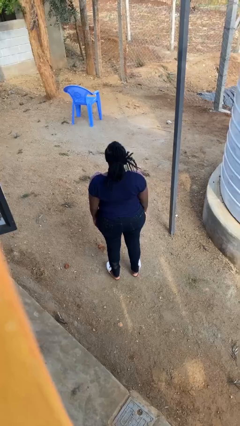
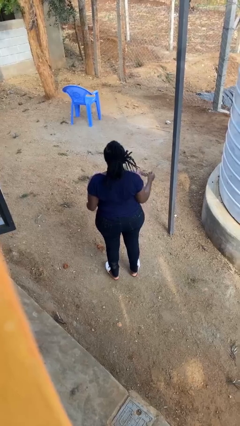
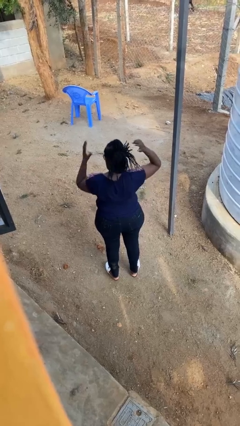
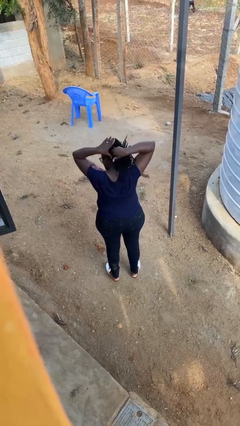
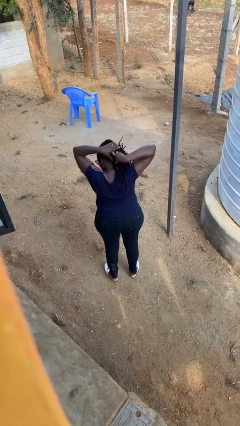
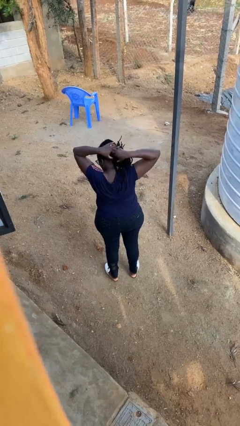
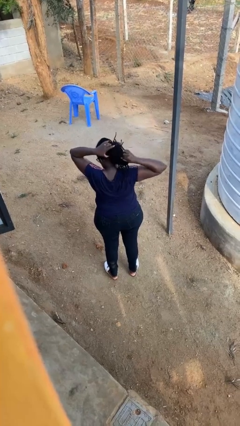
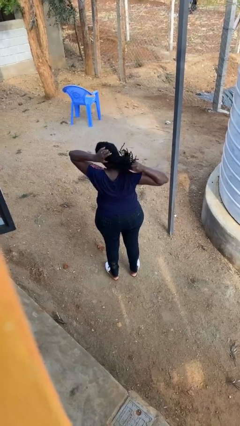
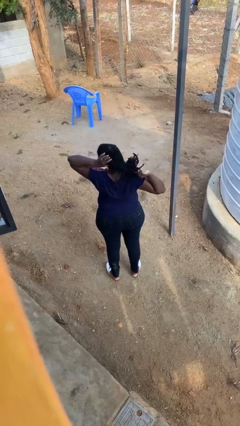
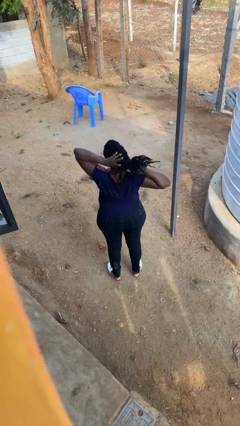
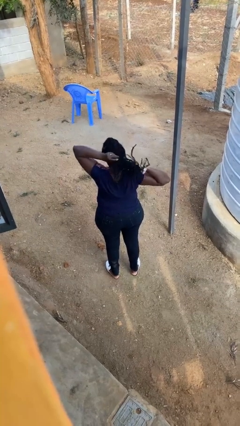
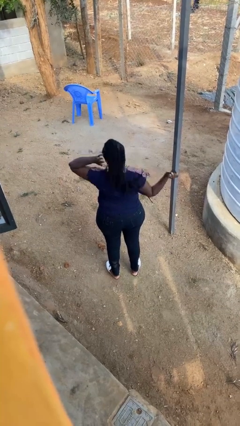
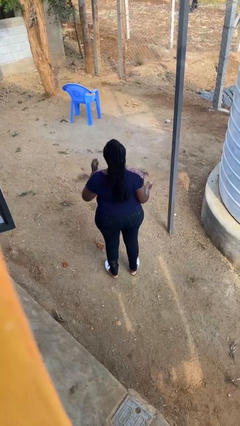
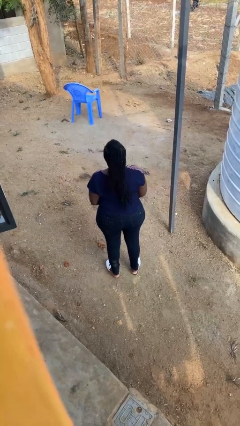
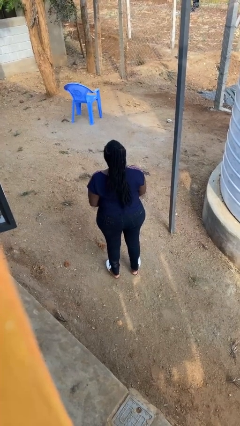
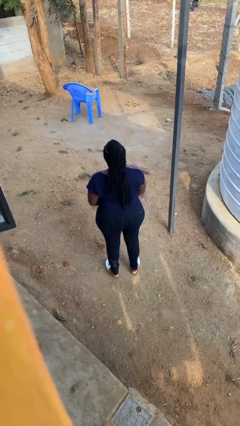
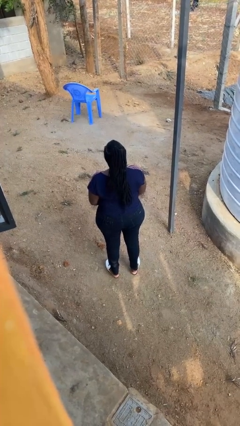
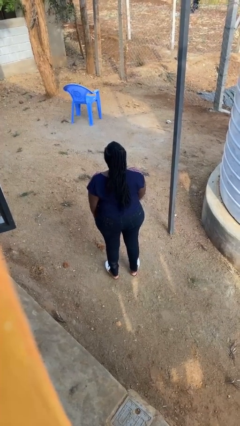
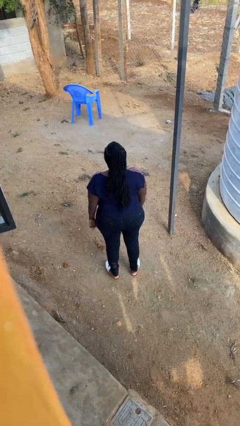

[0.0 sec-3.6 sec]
person takes off hairtie

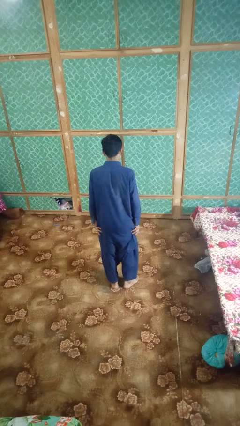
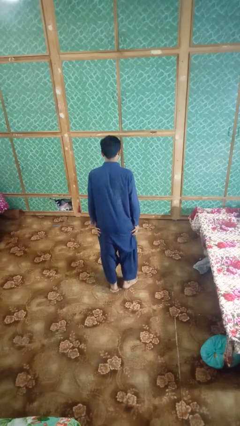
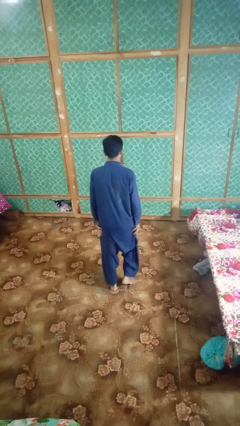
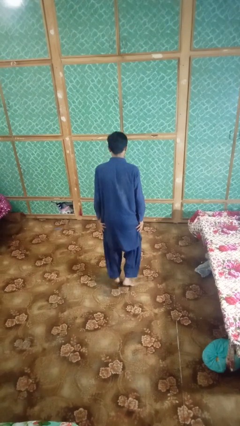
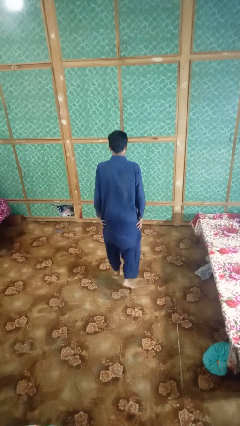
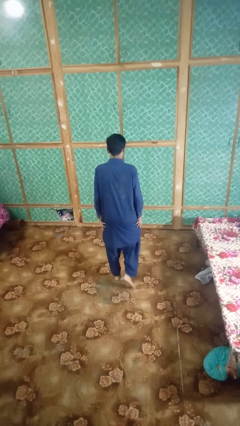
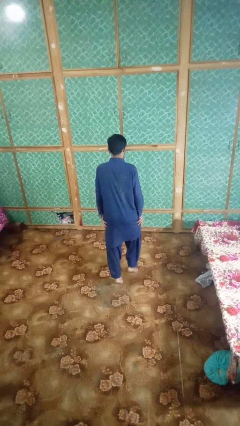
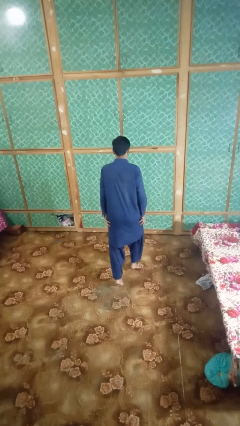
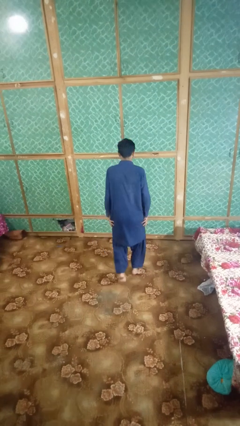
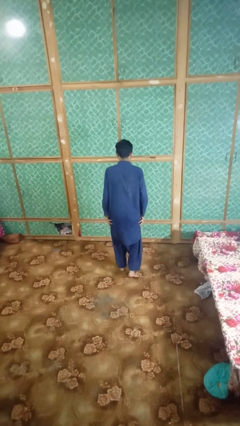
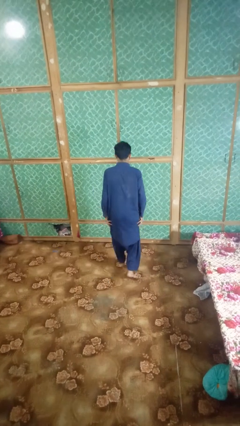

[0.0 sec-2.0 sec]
person walks tiptoe

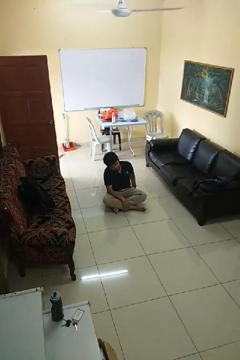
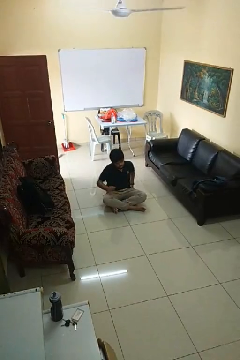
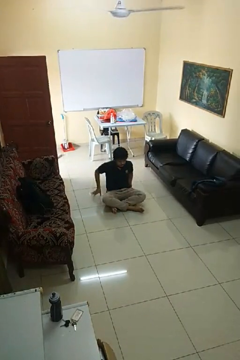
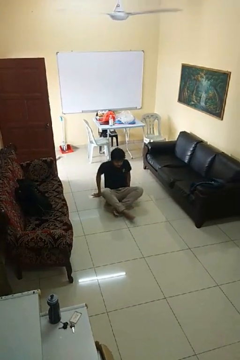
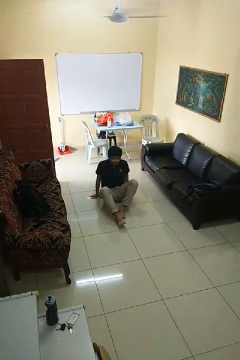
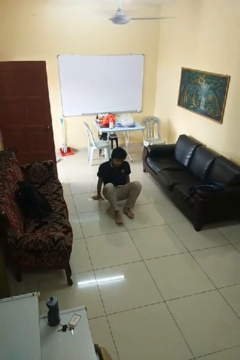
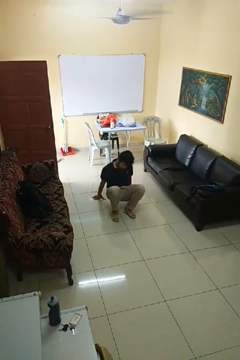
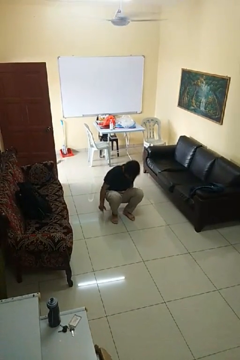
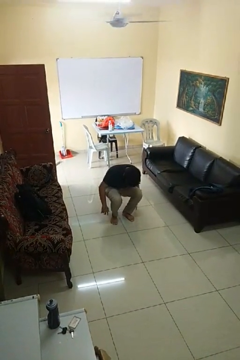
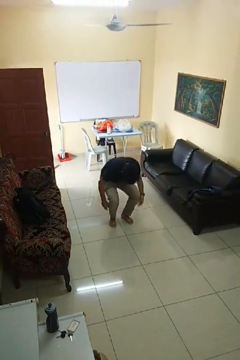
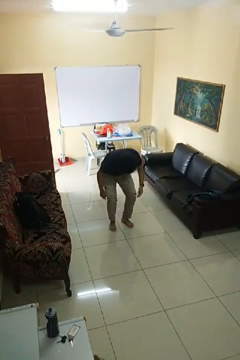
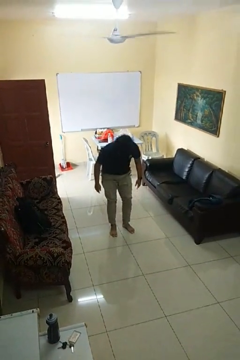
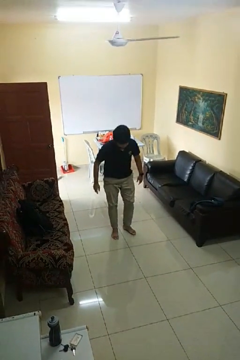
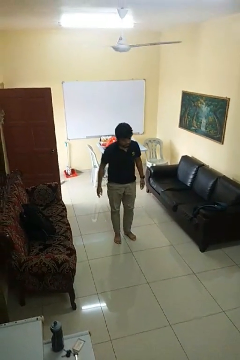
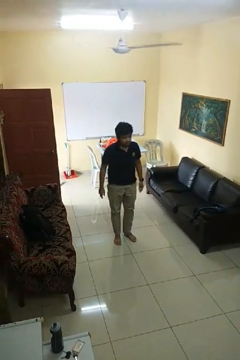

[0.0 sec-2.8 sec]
person stands up from floor

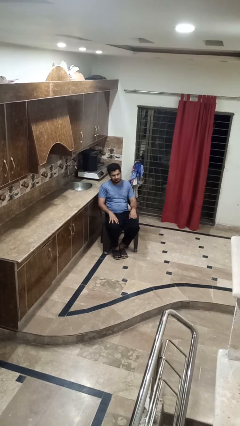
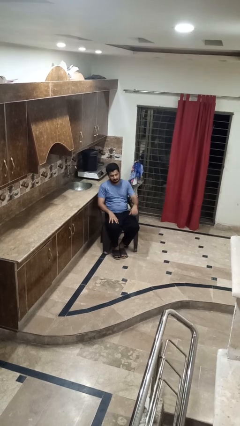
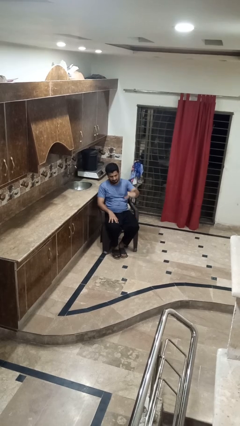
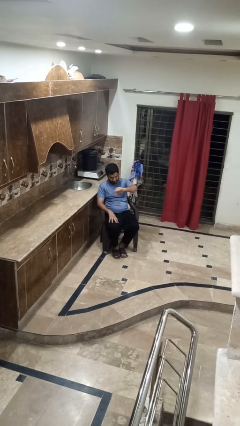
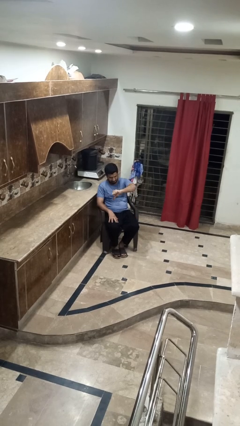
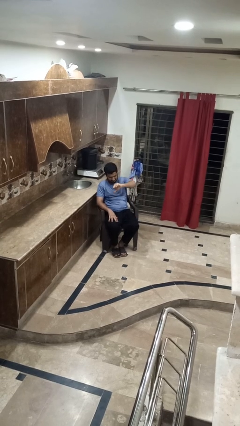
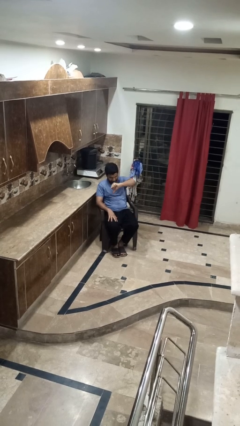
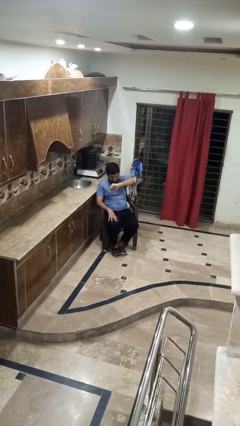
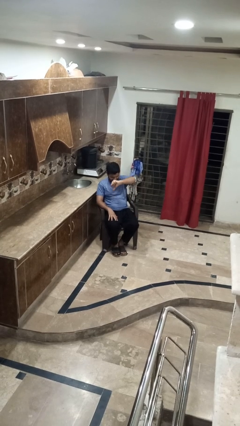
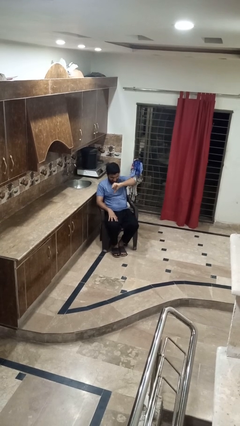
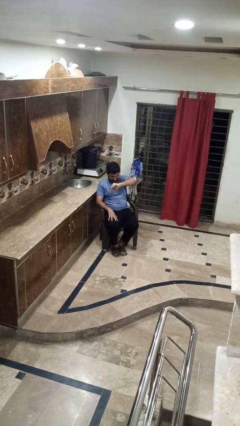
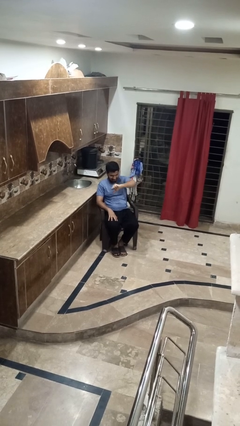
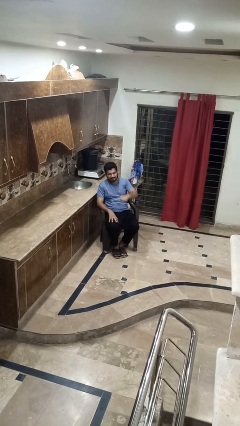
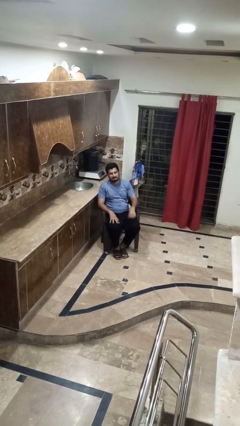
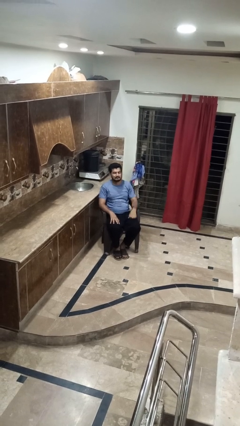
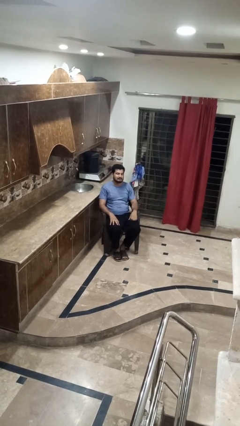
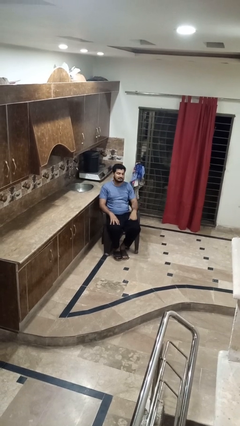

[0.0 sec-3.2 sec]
person gestures thumbs down

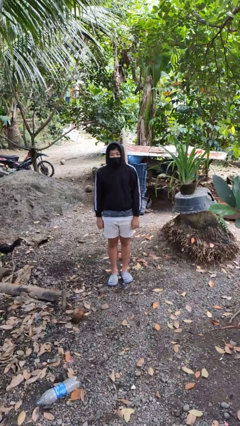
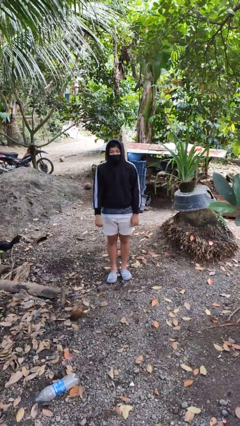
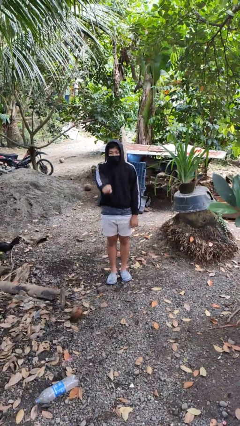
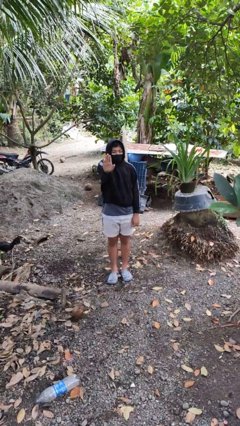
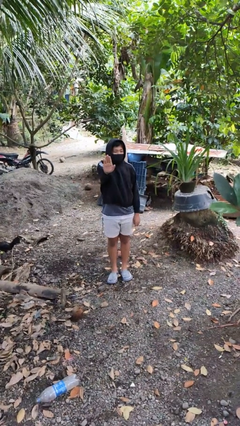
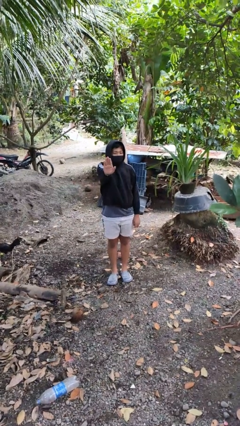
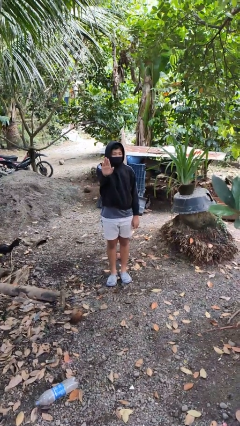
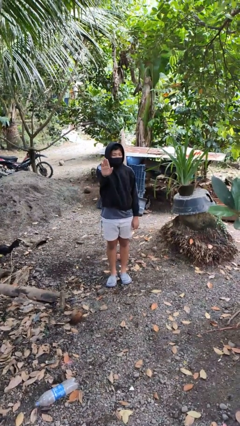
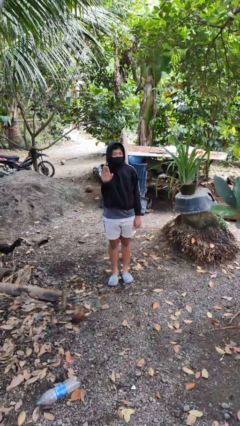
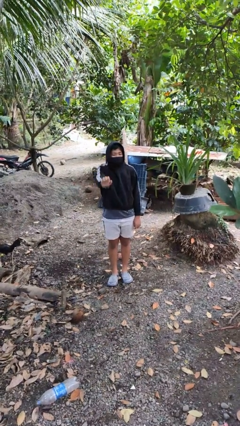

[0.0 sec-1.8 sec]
person gestures stop

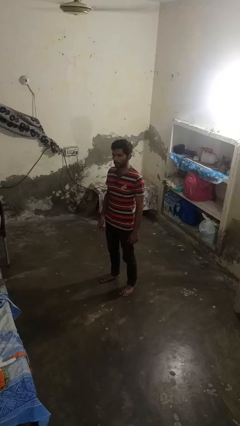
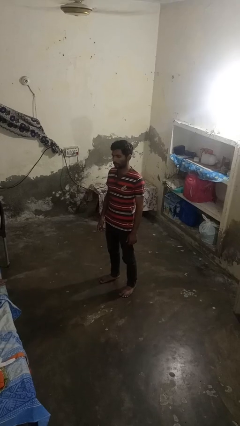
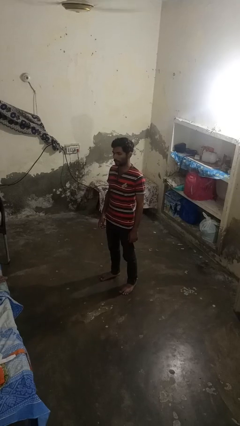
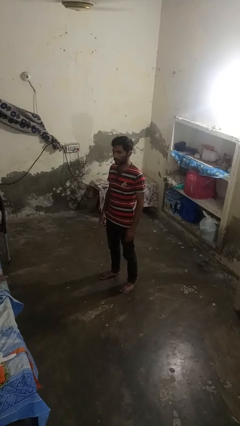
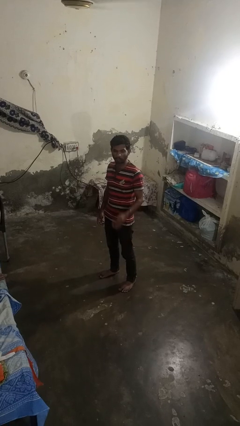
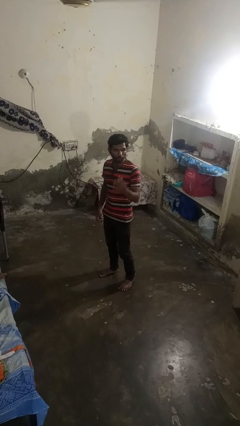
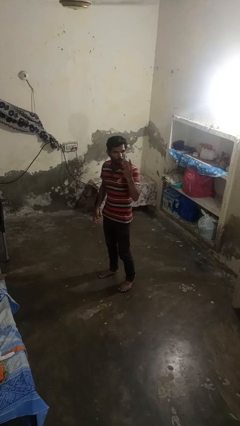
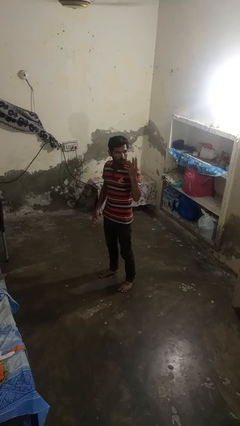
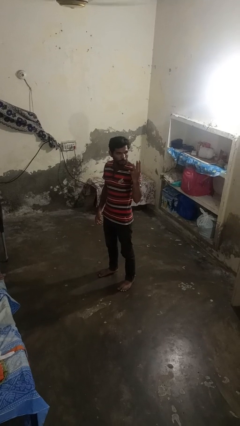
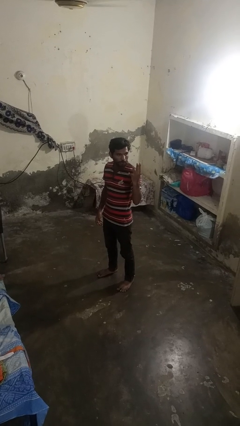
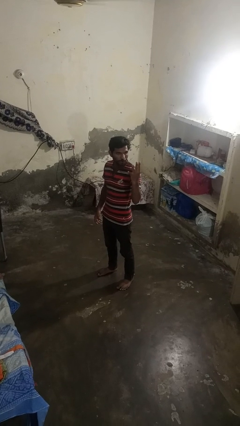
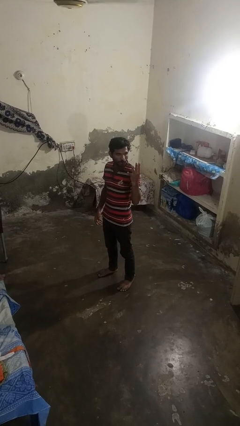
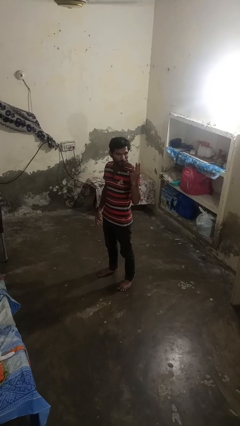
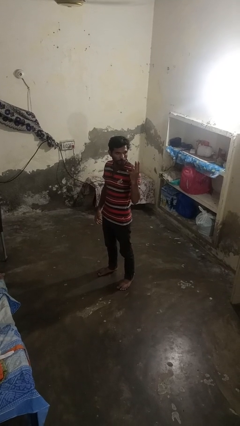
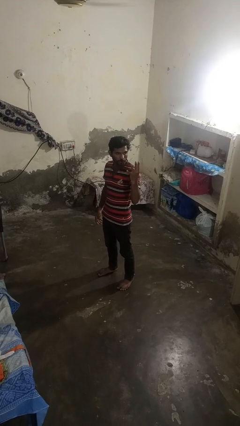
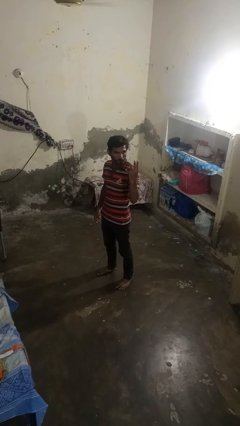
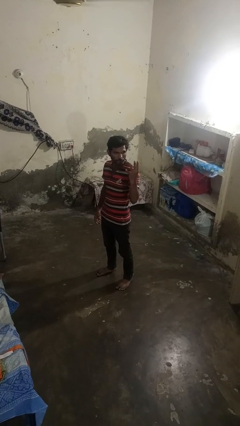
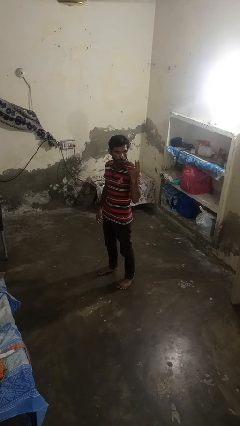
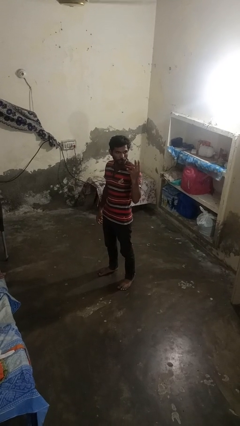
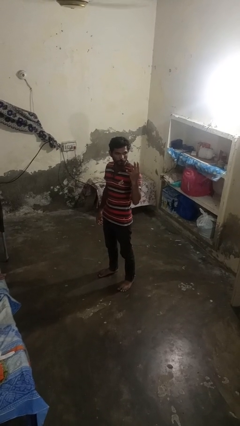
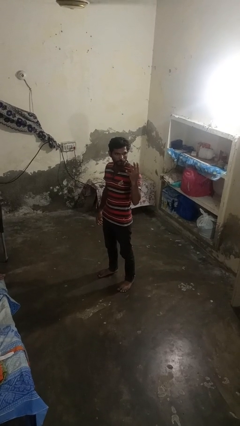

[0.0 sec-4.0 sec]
person gestures number four

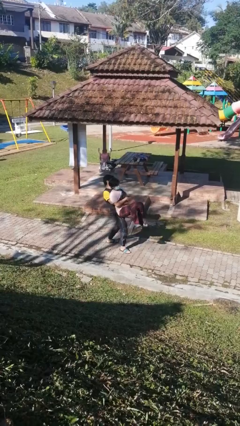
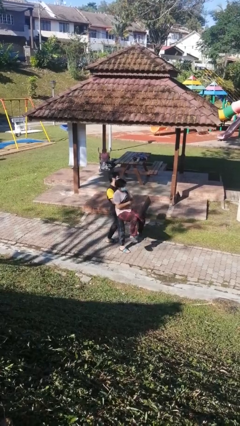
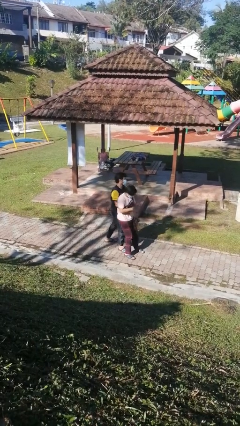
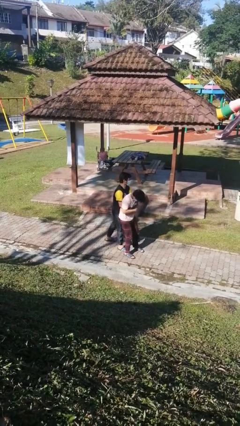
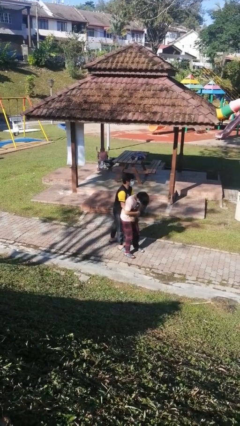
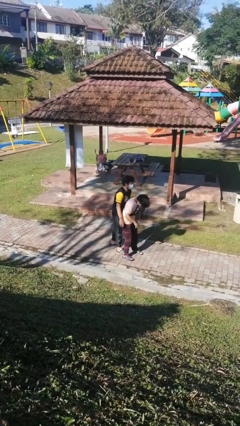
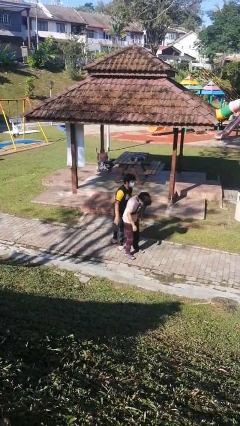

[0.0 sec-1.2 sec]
person puts down person
